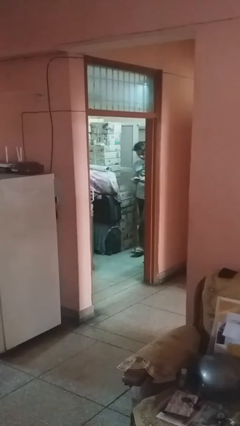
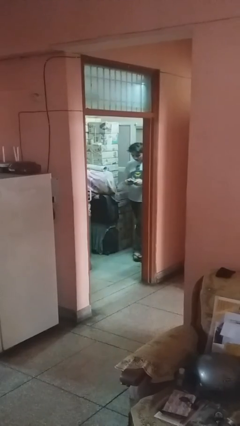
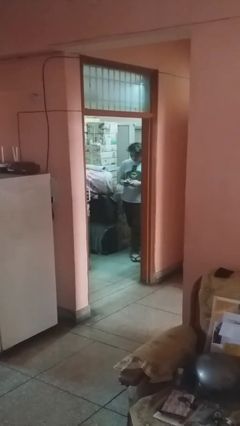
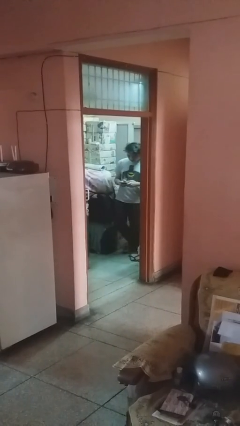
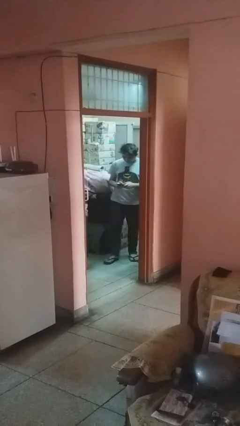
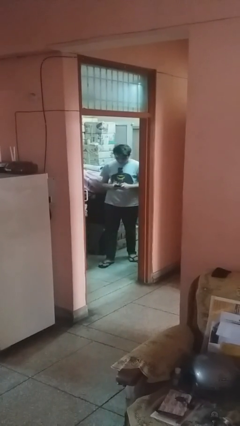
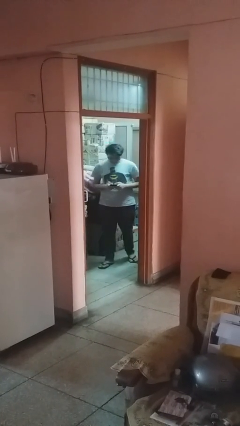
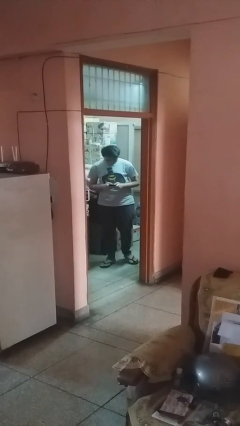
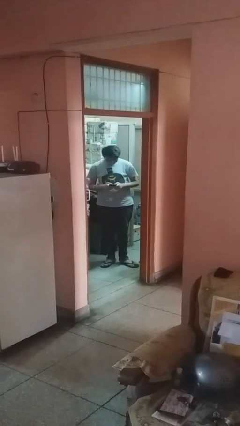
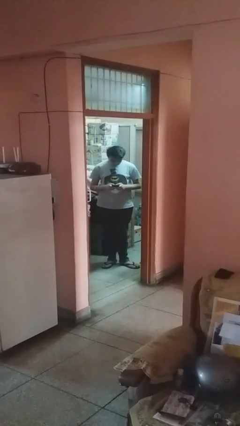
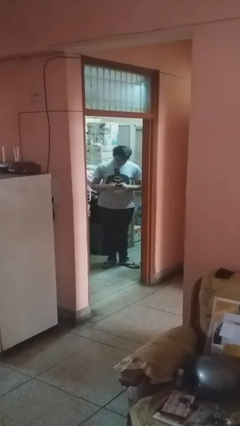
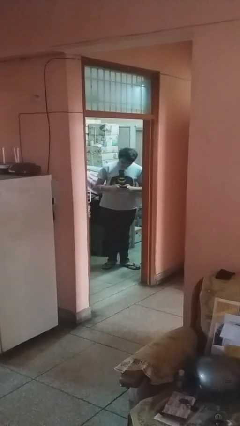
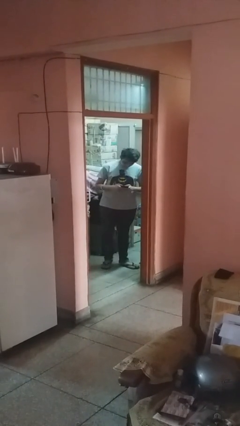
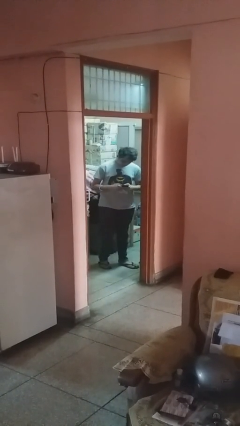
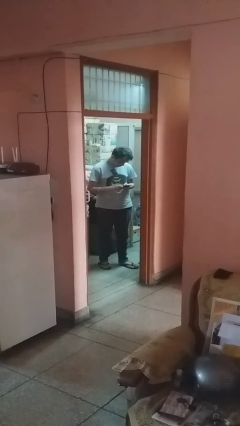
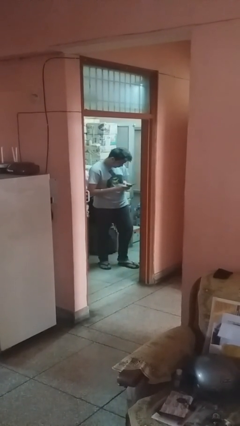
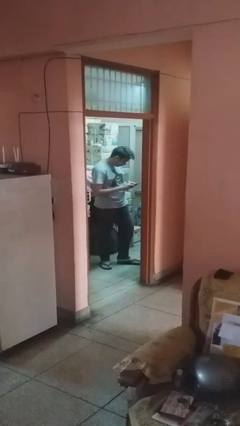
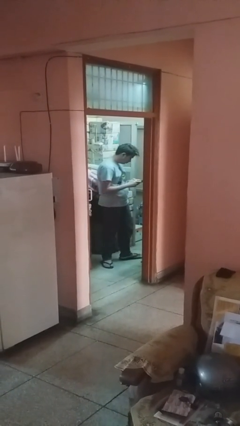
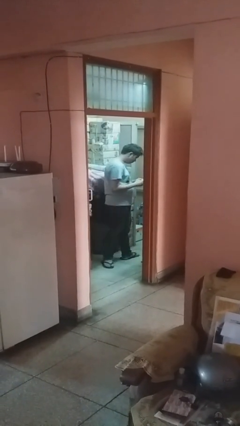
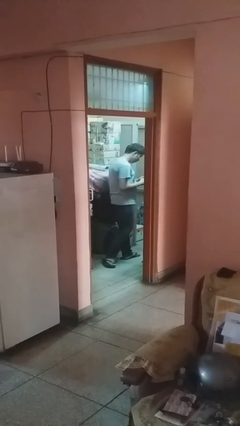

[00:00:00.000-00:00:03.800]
person enters scene through structure

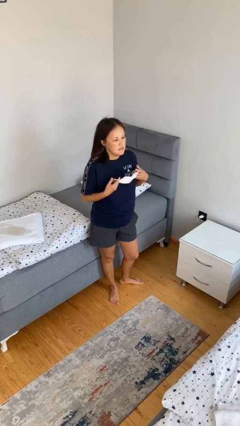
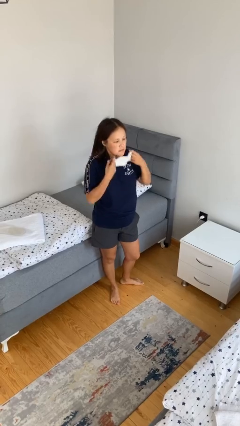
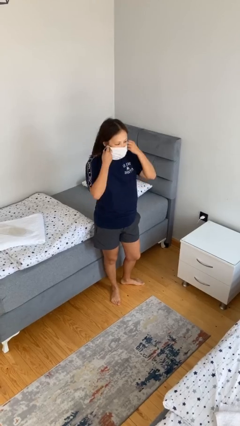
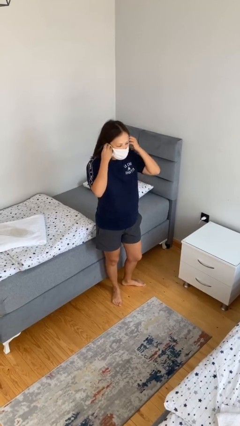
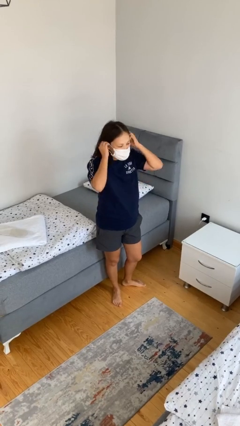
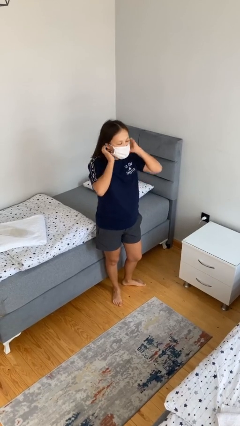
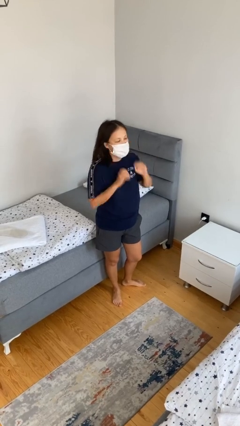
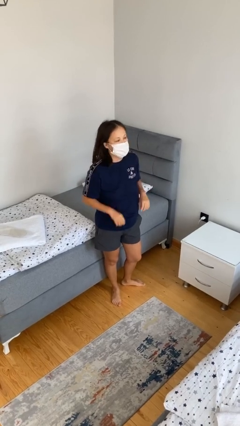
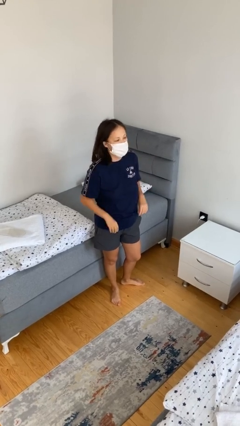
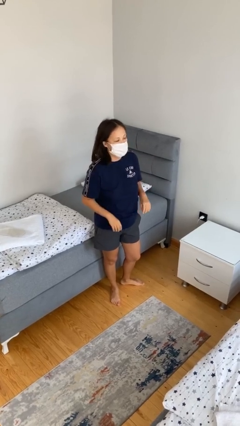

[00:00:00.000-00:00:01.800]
person puts on facemask

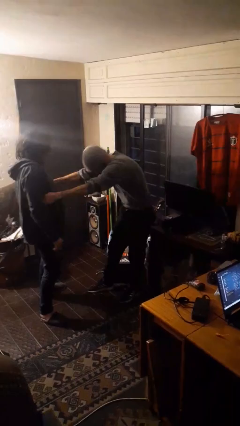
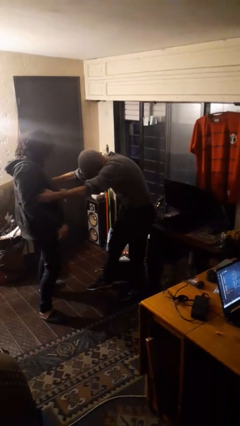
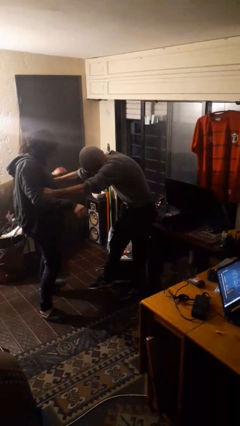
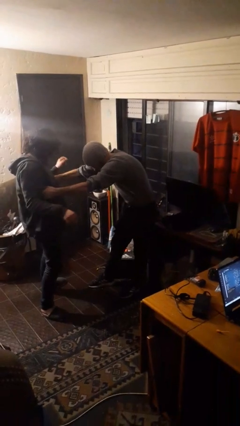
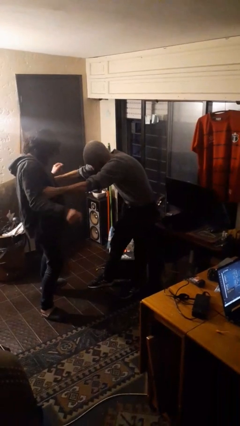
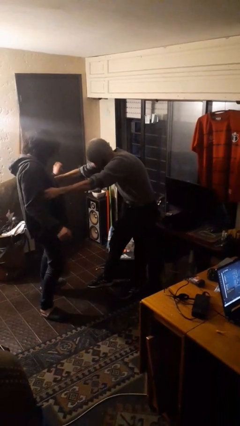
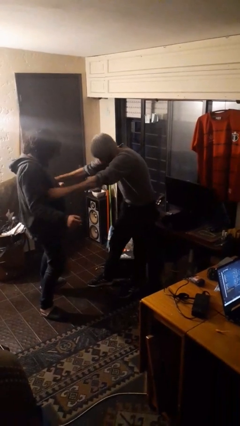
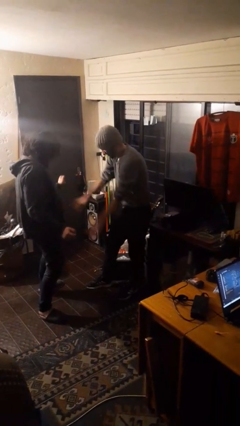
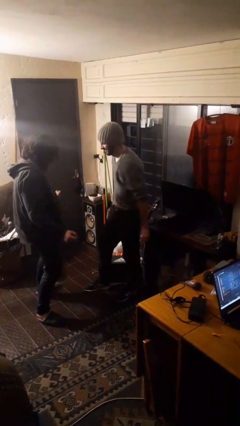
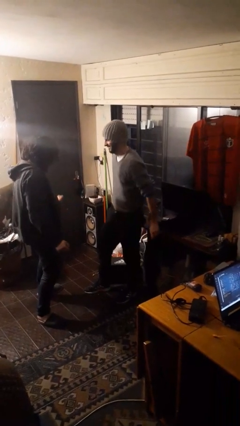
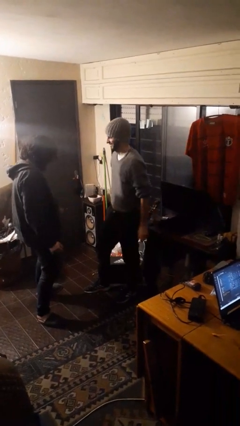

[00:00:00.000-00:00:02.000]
person tickles person

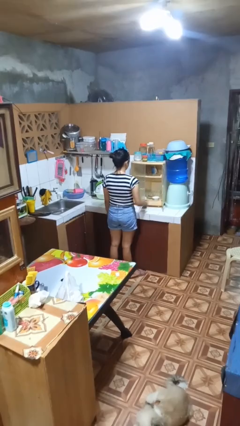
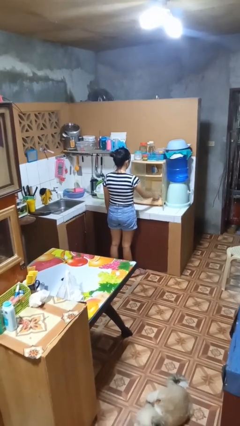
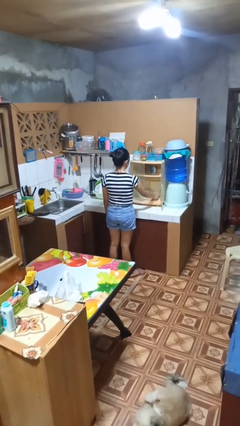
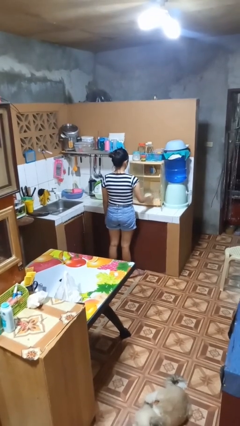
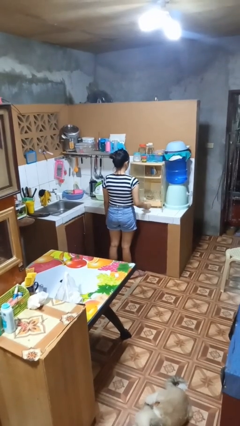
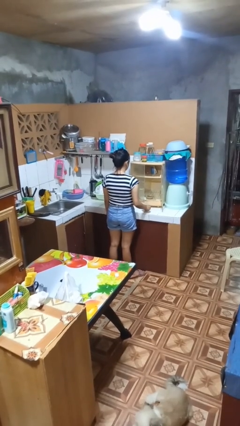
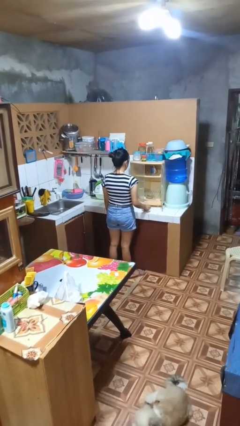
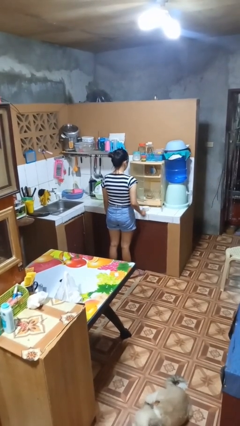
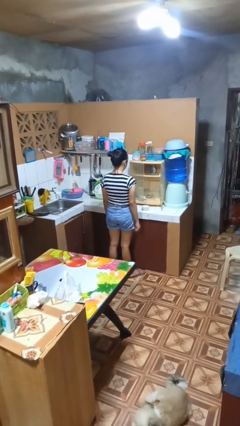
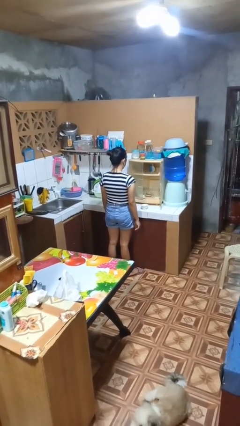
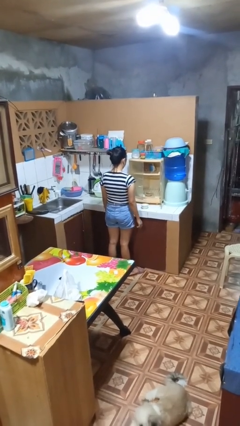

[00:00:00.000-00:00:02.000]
person takes object from cabinet

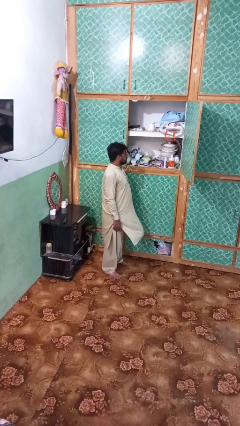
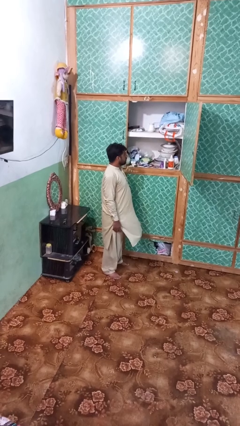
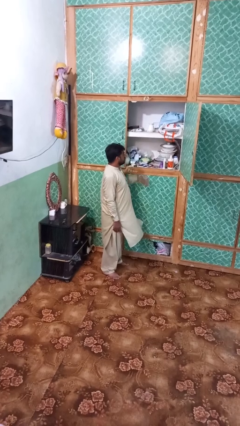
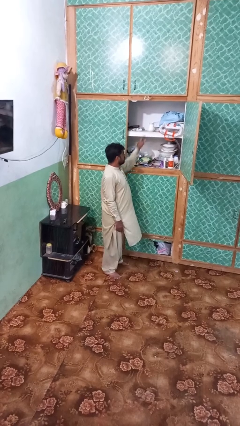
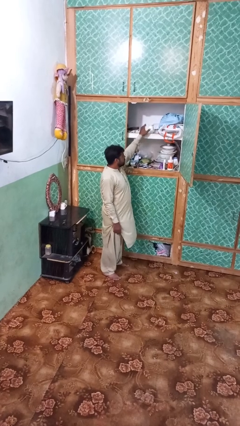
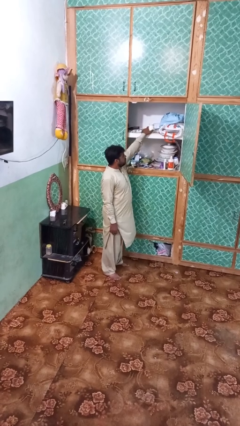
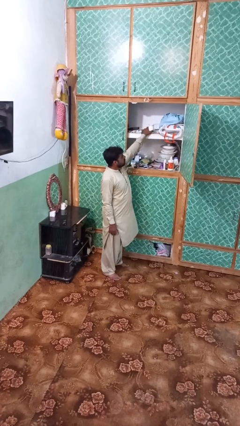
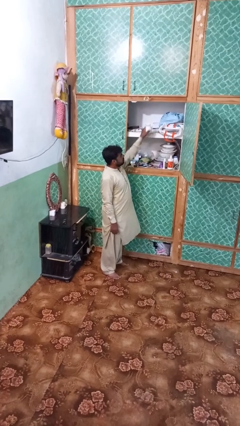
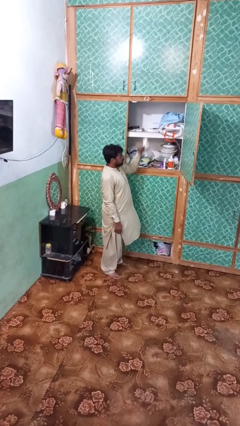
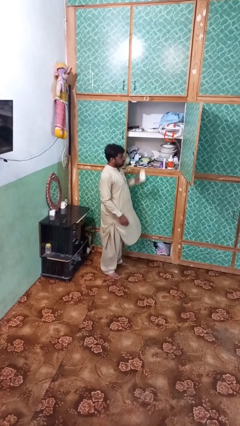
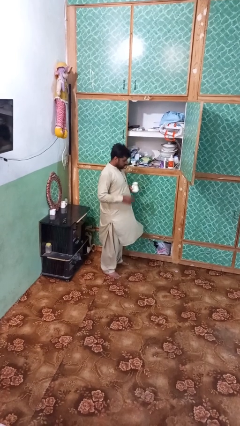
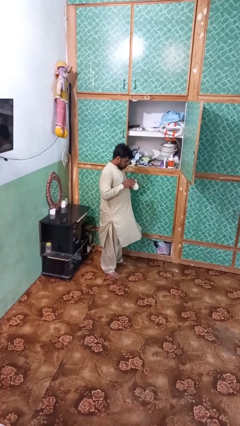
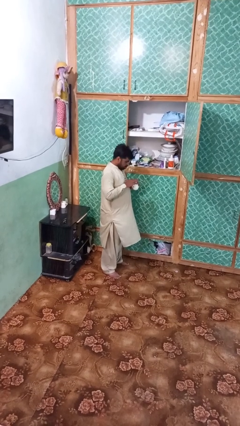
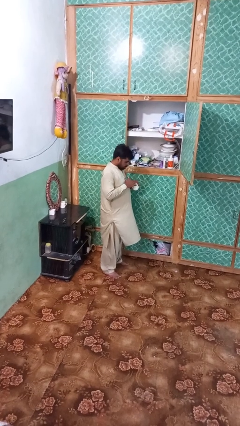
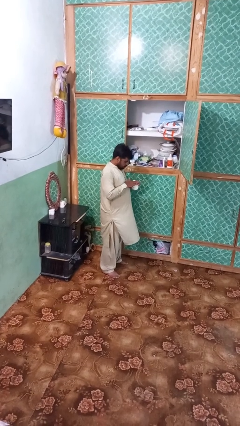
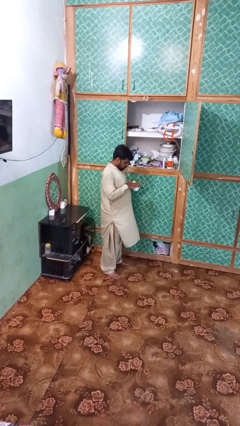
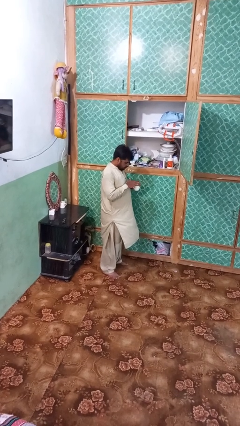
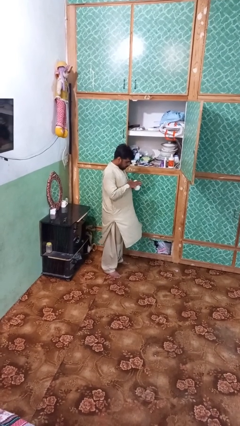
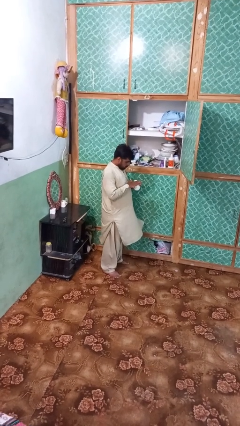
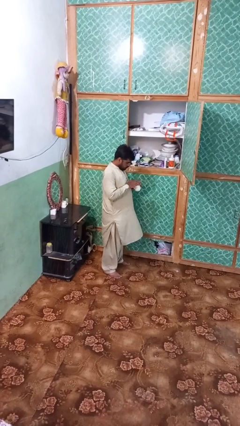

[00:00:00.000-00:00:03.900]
person picks up object from shelf

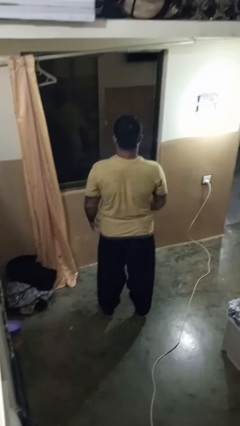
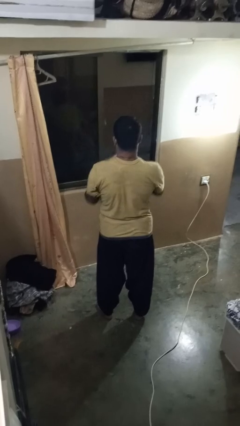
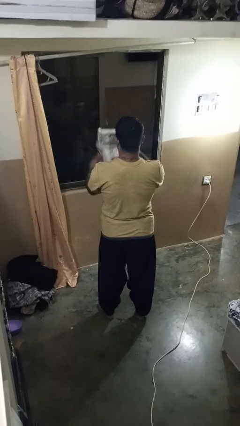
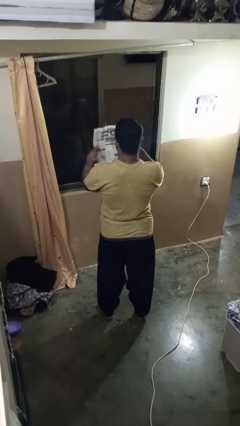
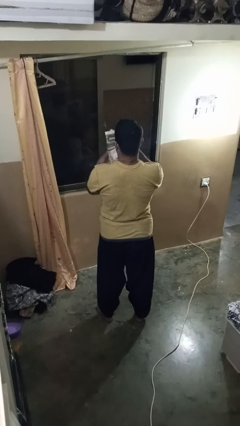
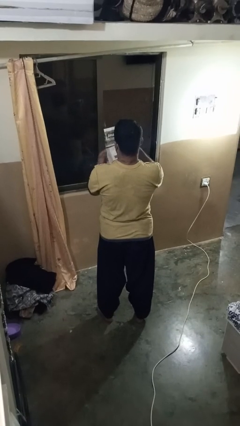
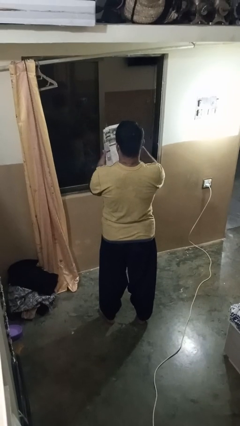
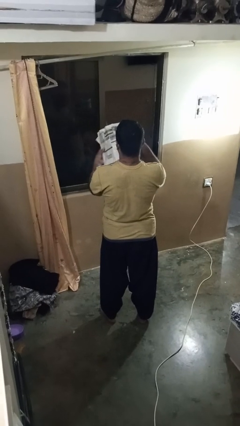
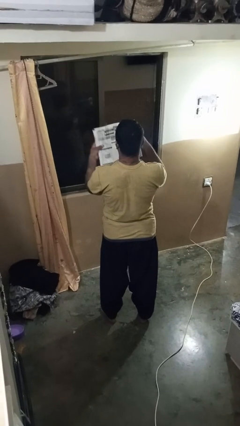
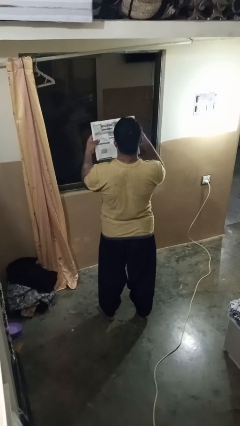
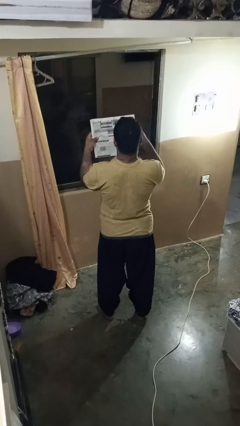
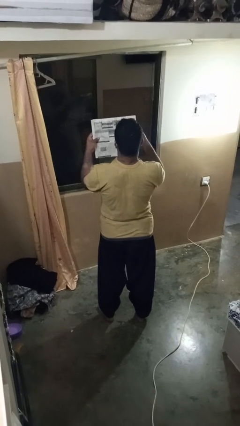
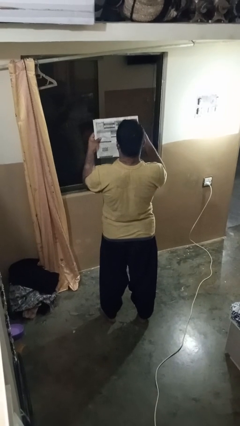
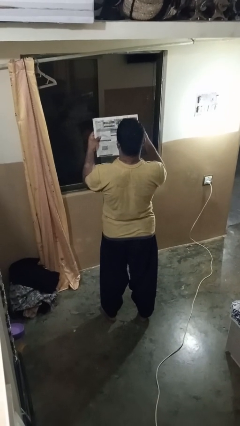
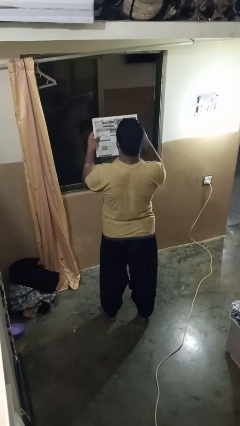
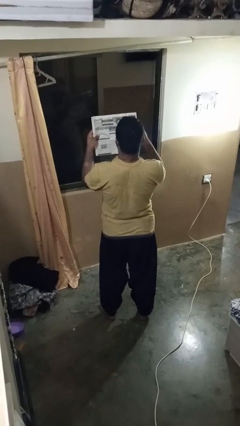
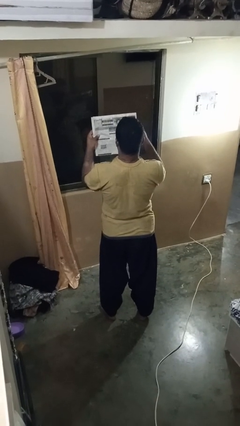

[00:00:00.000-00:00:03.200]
person reads newspaper

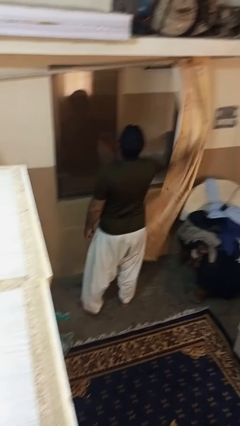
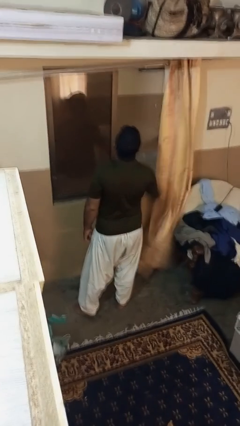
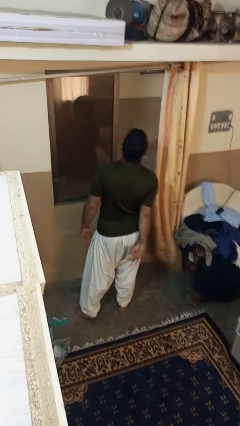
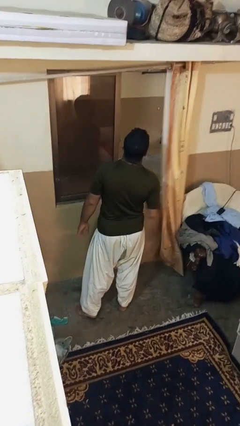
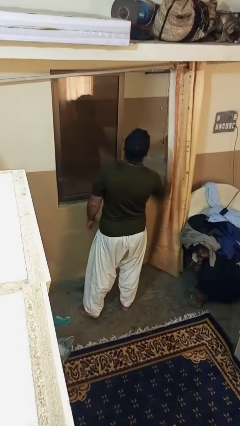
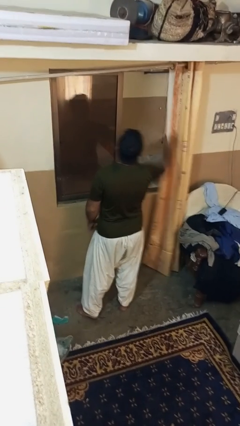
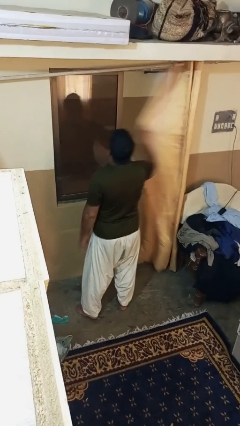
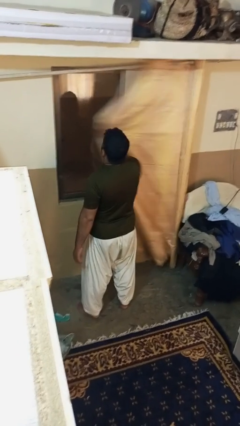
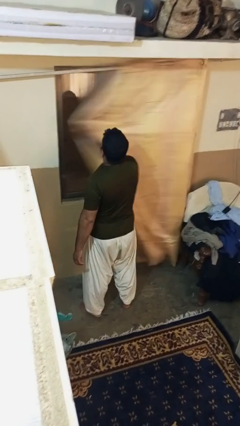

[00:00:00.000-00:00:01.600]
person closes curtains
